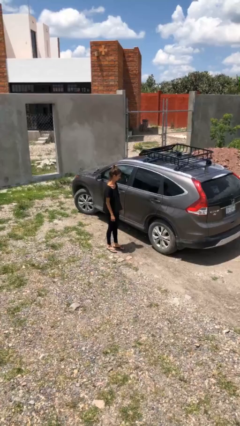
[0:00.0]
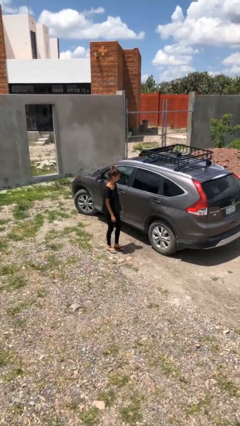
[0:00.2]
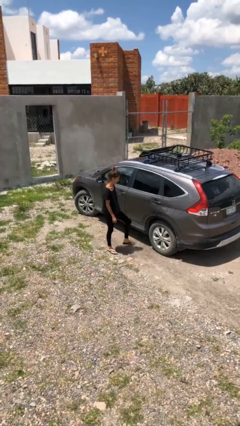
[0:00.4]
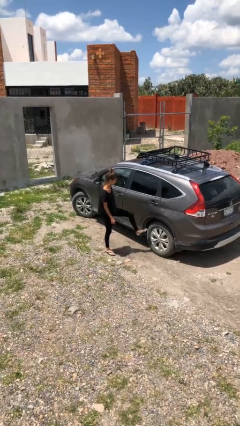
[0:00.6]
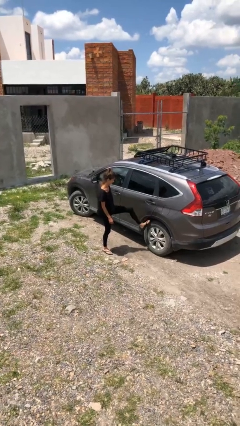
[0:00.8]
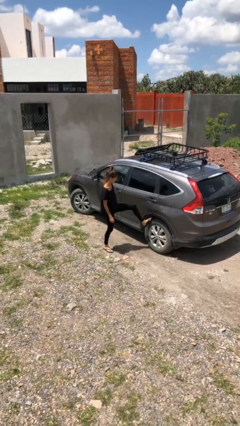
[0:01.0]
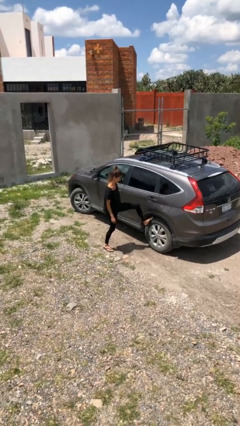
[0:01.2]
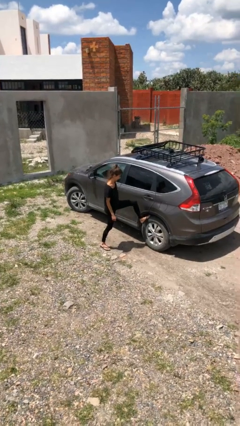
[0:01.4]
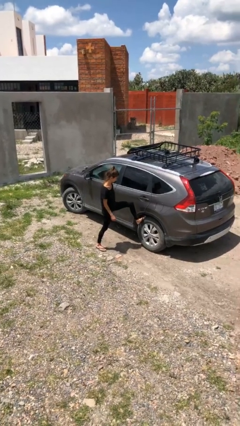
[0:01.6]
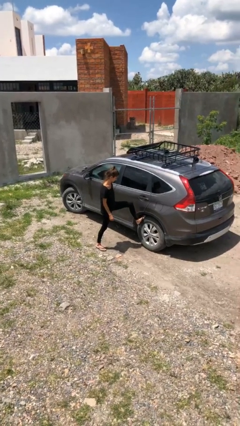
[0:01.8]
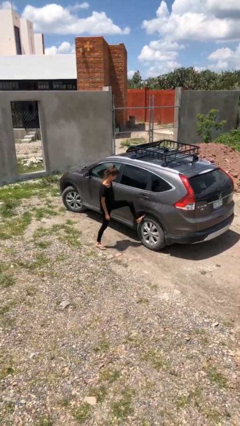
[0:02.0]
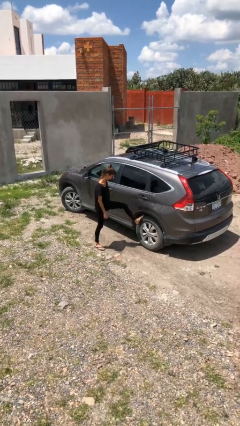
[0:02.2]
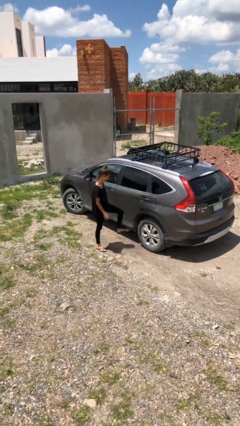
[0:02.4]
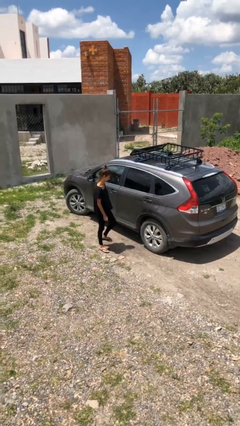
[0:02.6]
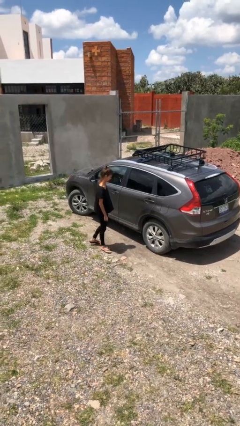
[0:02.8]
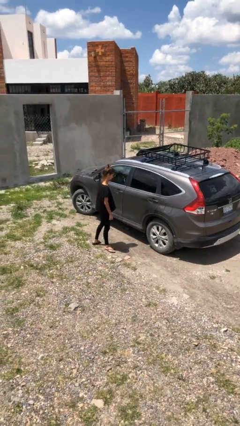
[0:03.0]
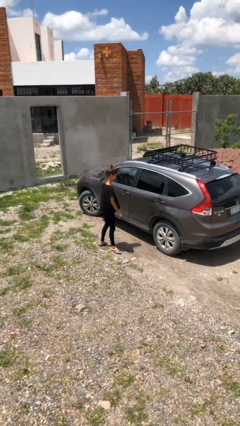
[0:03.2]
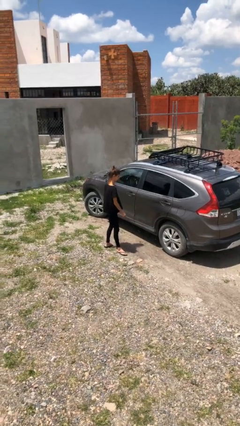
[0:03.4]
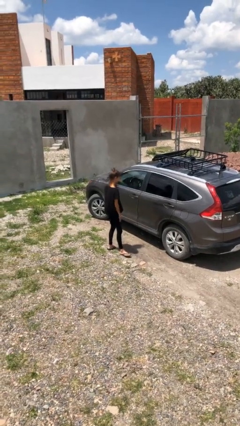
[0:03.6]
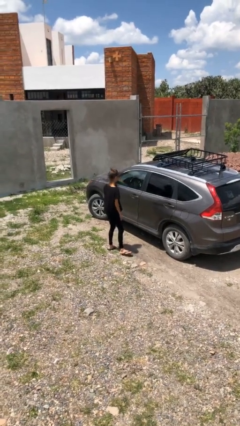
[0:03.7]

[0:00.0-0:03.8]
person kicks car tires

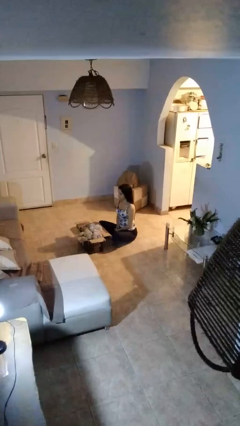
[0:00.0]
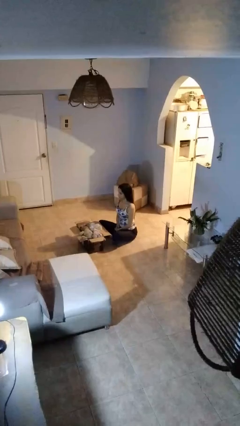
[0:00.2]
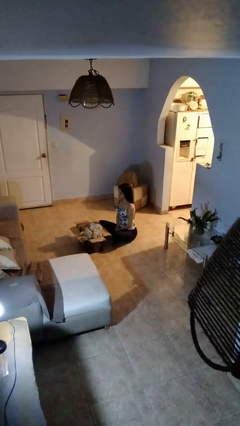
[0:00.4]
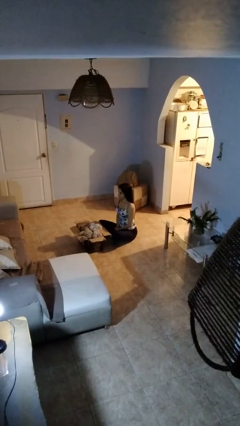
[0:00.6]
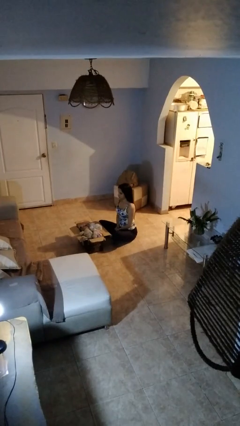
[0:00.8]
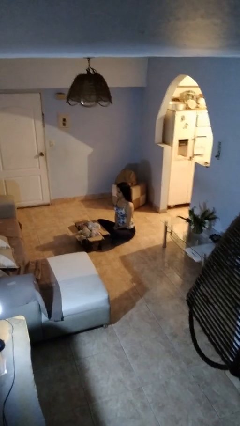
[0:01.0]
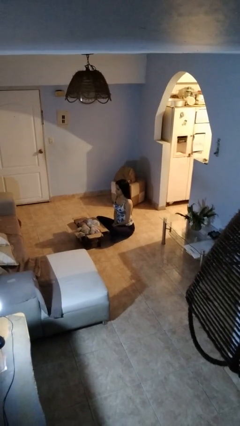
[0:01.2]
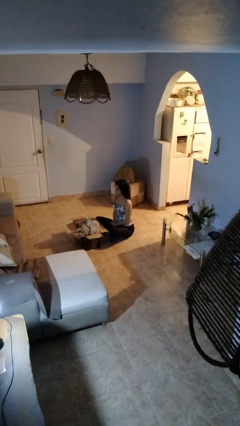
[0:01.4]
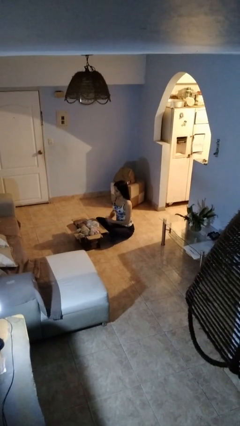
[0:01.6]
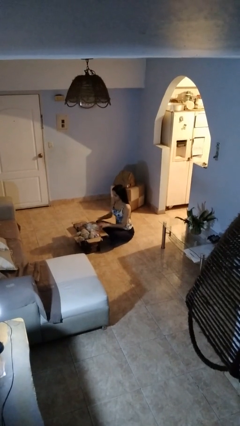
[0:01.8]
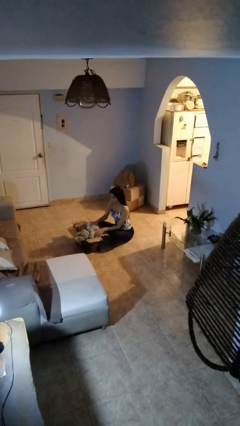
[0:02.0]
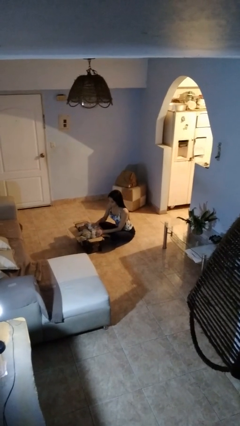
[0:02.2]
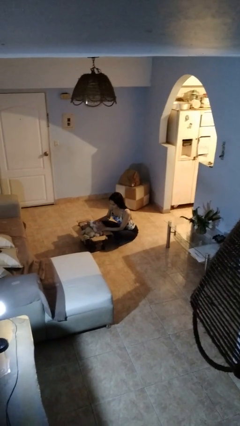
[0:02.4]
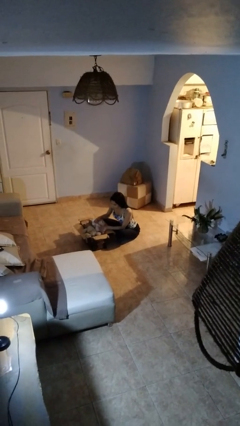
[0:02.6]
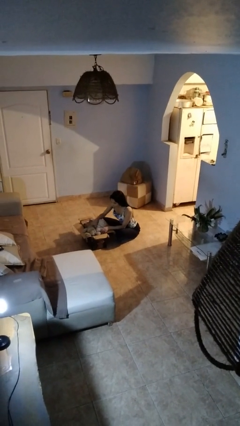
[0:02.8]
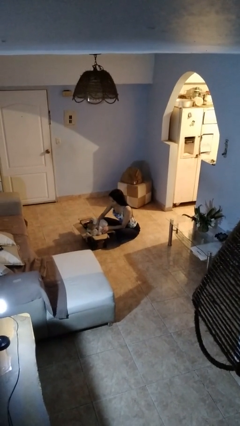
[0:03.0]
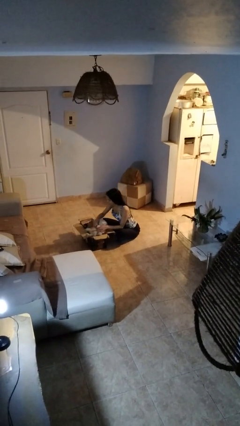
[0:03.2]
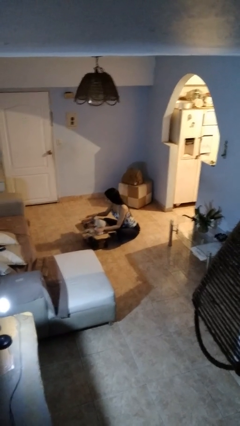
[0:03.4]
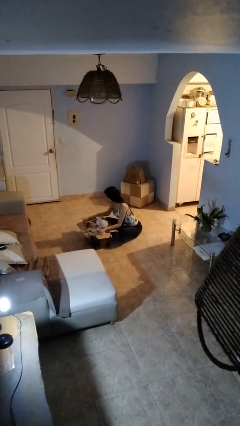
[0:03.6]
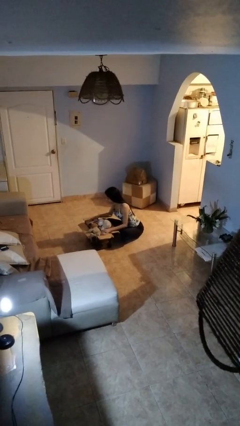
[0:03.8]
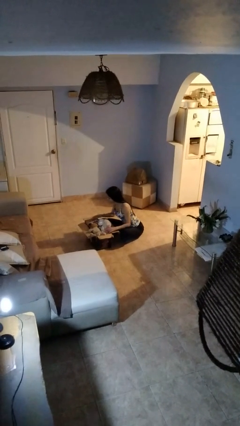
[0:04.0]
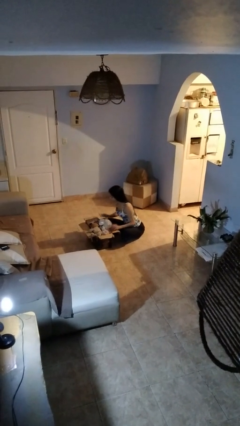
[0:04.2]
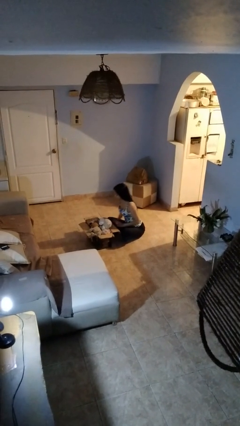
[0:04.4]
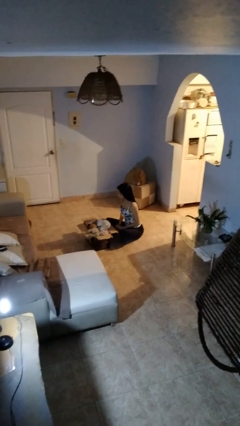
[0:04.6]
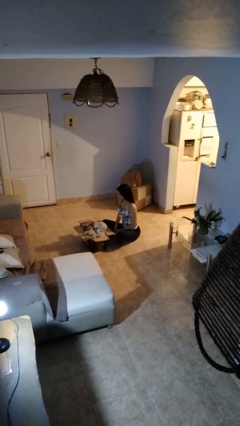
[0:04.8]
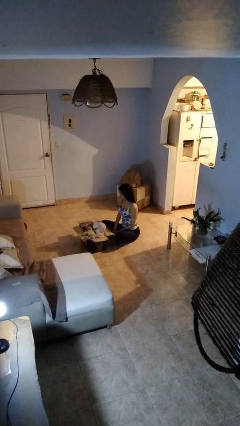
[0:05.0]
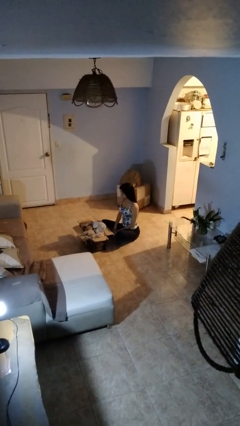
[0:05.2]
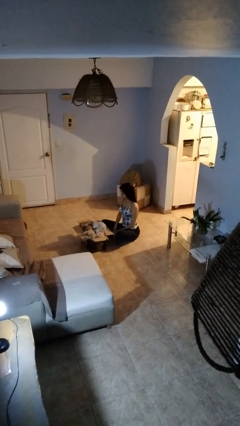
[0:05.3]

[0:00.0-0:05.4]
person searches in box

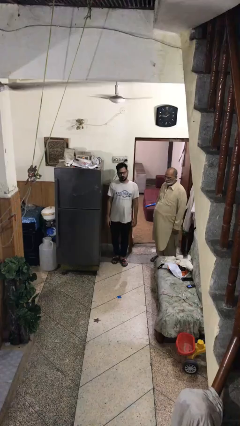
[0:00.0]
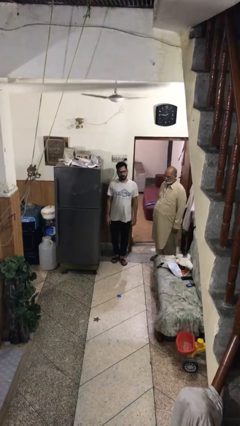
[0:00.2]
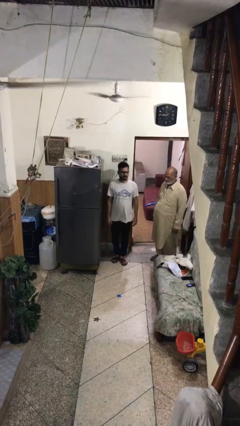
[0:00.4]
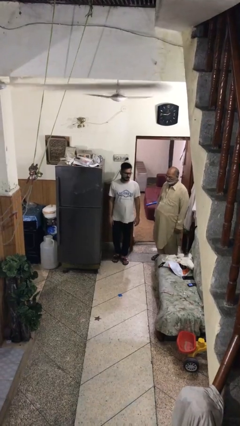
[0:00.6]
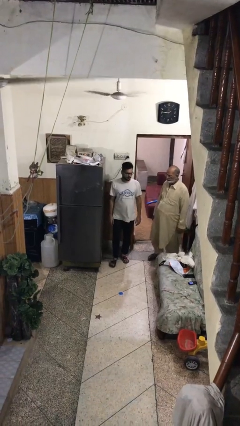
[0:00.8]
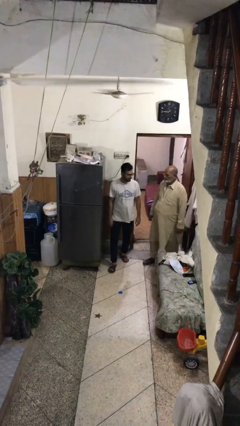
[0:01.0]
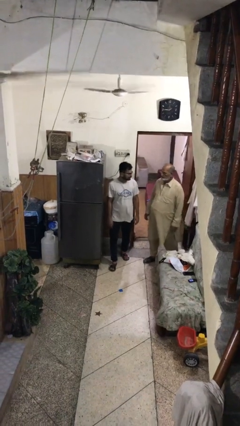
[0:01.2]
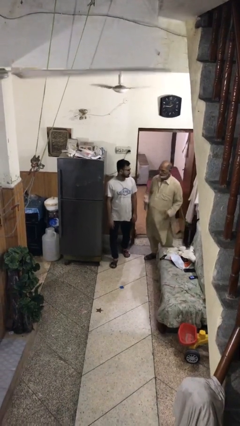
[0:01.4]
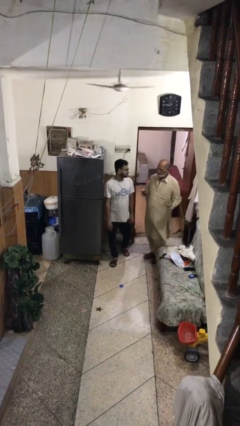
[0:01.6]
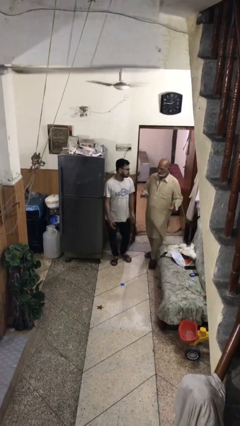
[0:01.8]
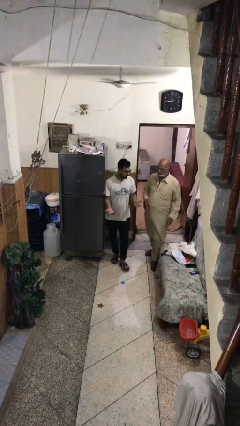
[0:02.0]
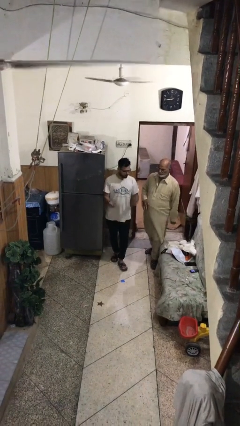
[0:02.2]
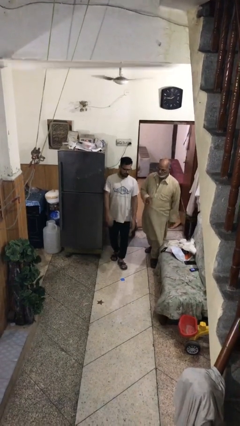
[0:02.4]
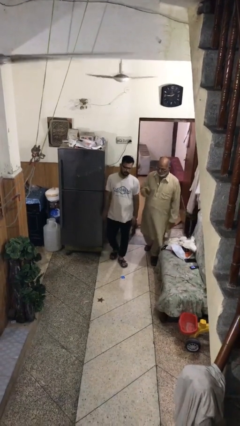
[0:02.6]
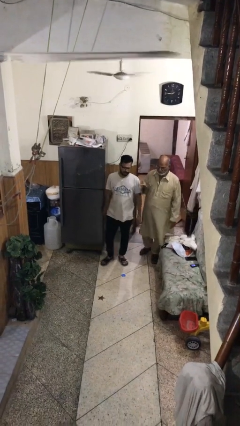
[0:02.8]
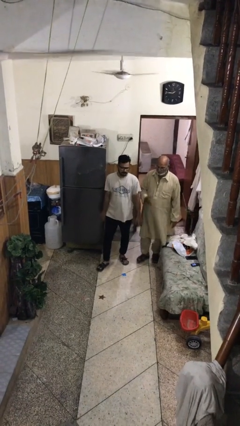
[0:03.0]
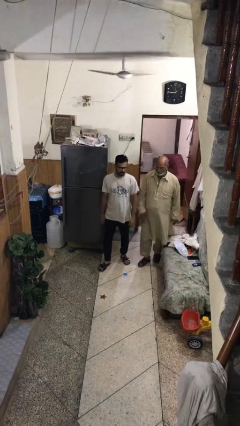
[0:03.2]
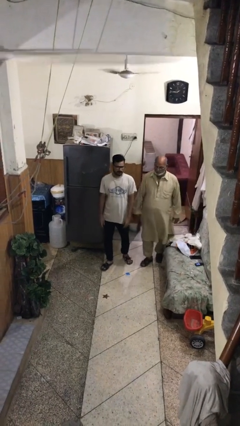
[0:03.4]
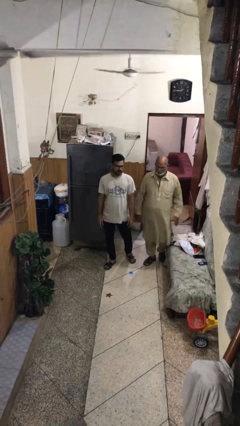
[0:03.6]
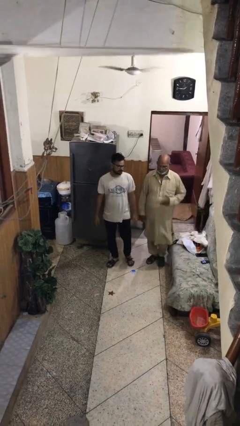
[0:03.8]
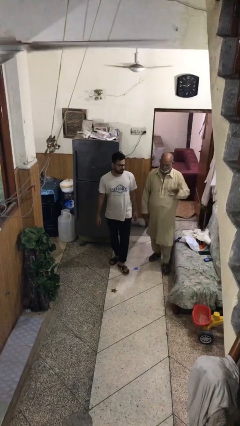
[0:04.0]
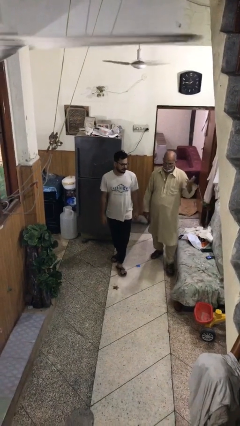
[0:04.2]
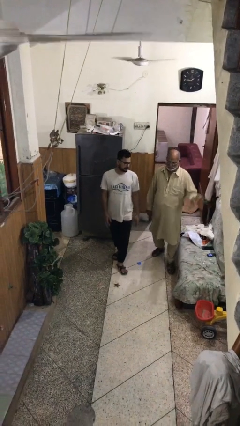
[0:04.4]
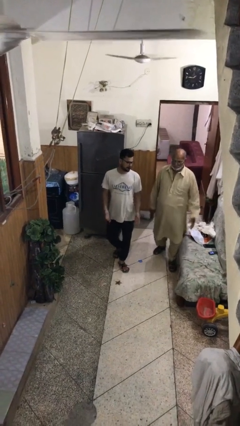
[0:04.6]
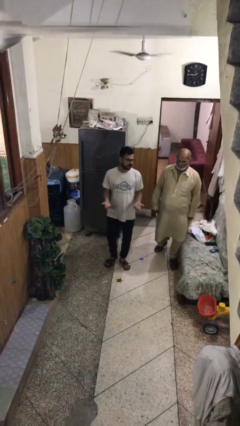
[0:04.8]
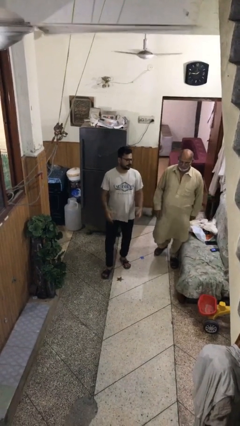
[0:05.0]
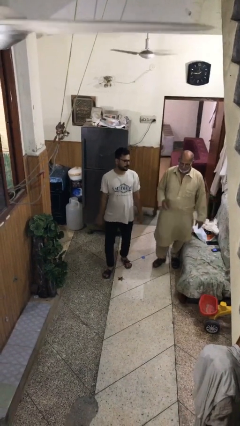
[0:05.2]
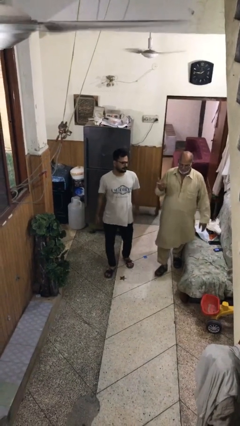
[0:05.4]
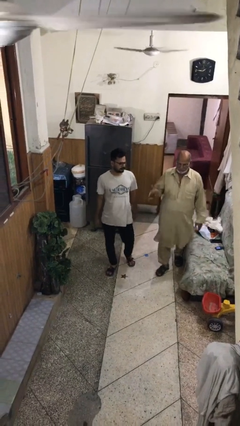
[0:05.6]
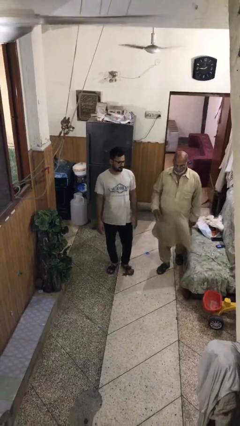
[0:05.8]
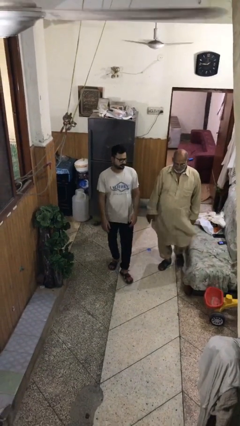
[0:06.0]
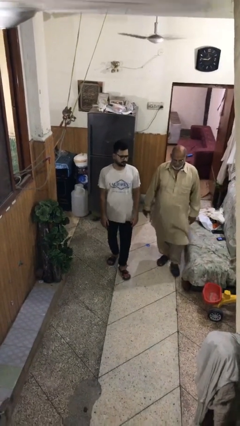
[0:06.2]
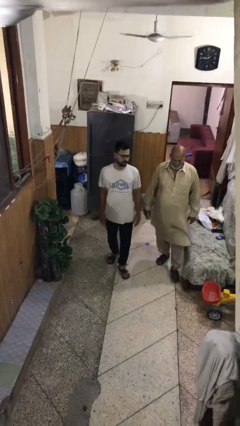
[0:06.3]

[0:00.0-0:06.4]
person talks to person

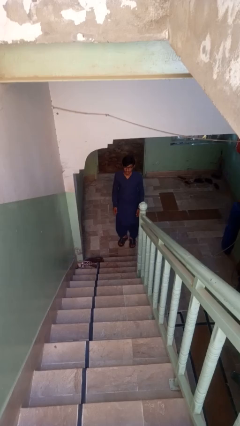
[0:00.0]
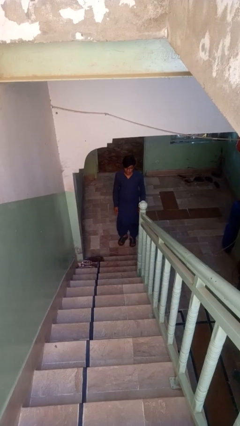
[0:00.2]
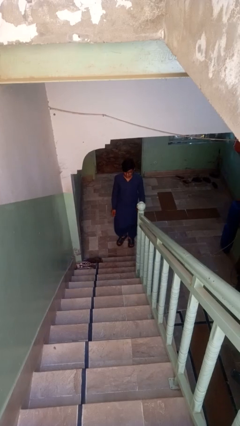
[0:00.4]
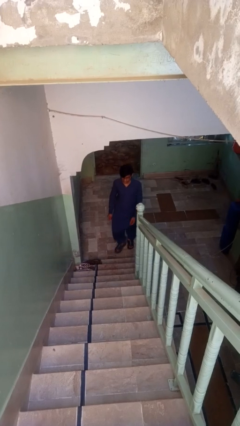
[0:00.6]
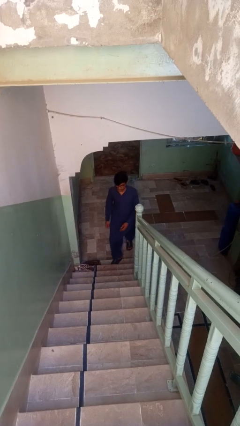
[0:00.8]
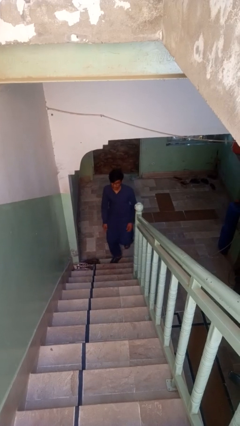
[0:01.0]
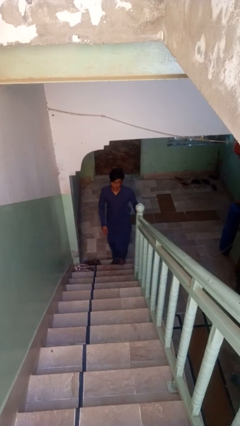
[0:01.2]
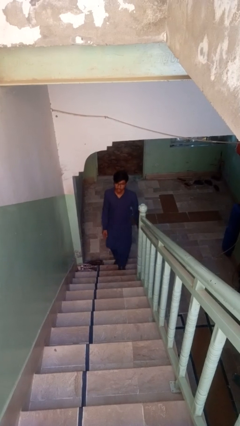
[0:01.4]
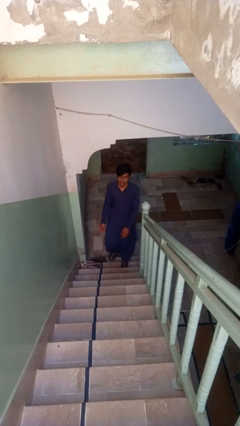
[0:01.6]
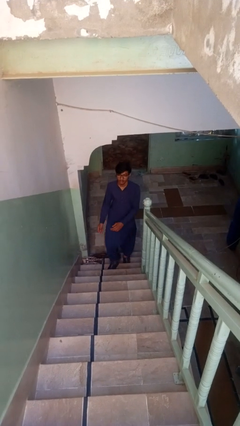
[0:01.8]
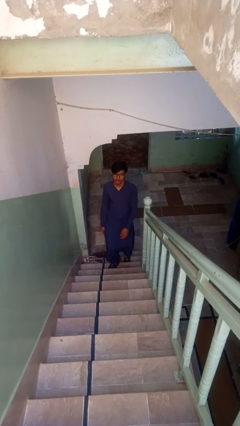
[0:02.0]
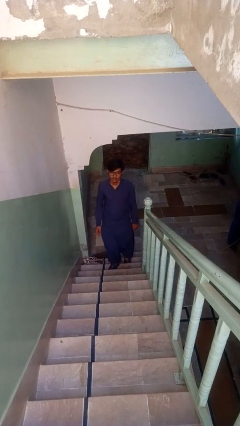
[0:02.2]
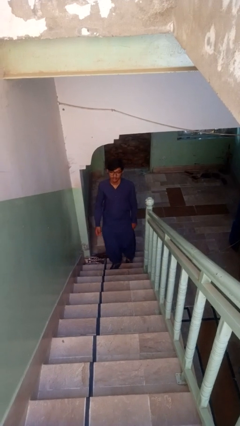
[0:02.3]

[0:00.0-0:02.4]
person climbs up stairs
